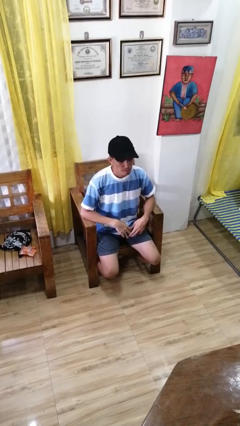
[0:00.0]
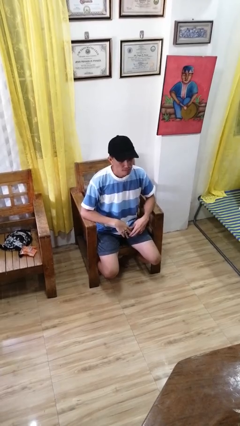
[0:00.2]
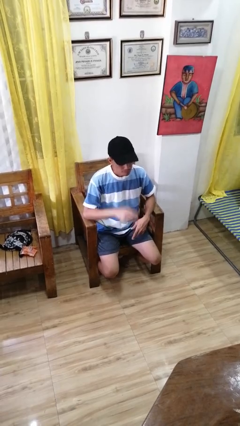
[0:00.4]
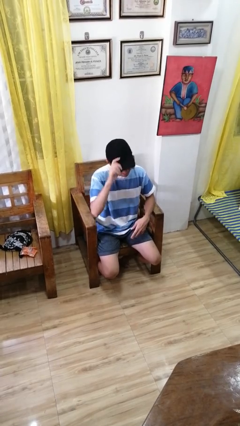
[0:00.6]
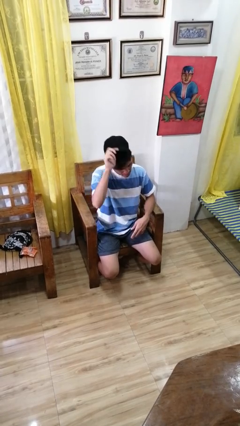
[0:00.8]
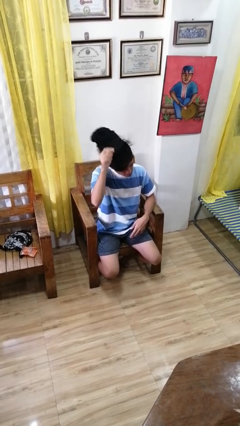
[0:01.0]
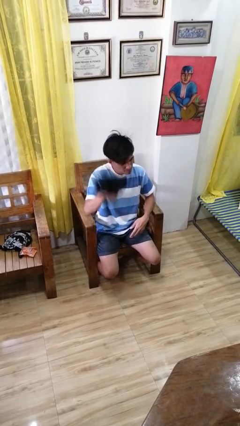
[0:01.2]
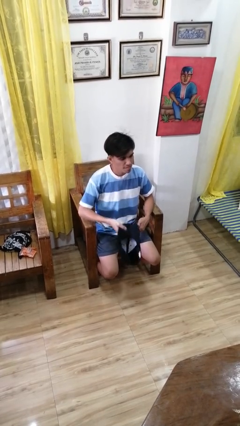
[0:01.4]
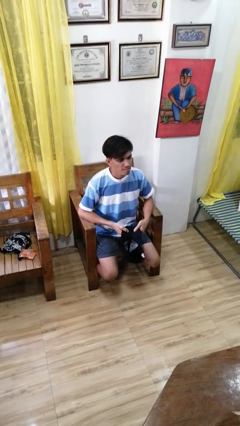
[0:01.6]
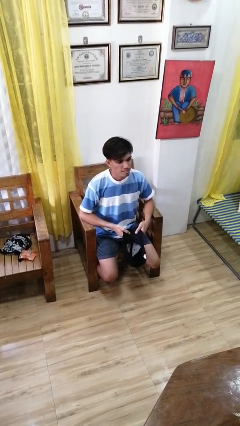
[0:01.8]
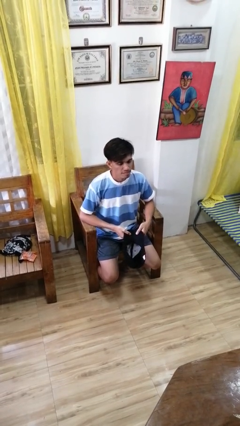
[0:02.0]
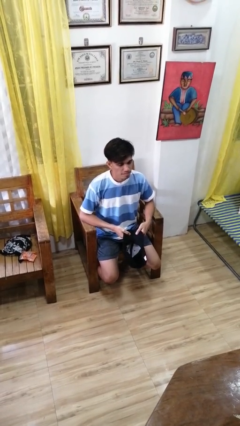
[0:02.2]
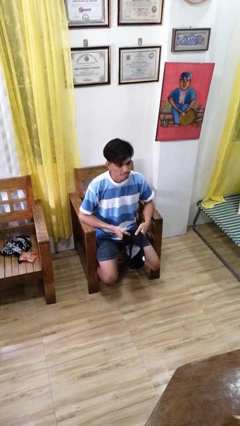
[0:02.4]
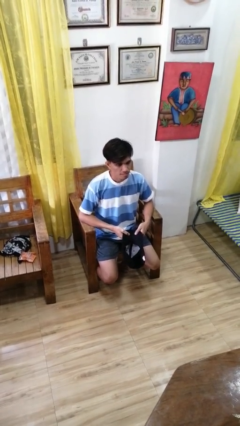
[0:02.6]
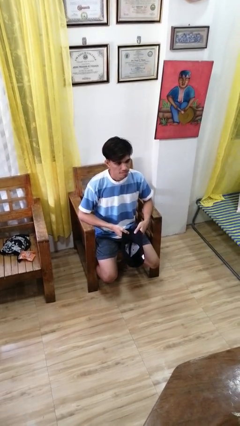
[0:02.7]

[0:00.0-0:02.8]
person takes off hat

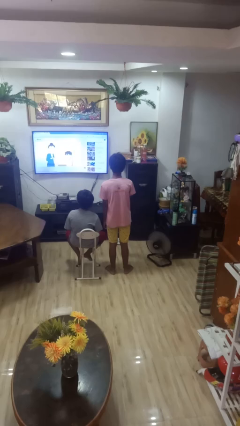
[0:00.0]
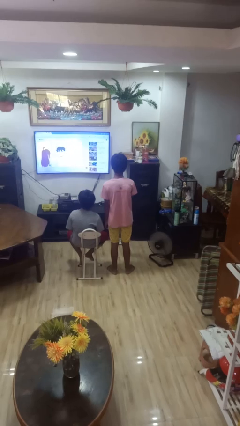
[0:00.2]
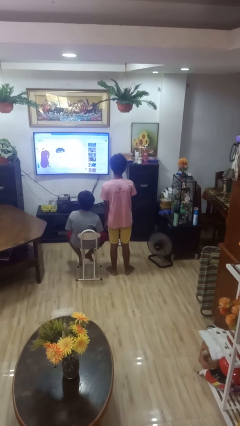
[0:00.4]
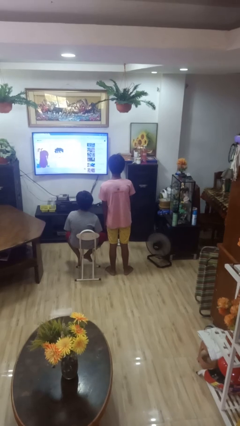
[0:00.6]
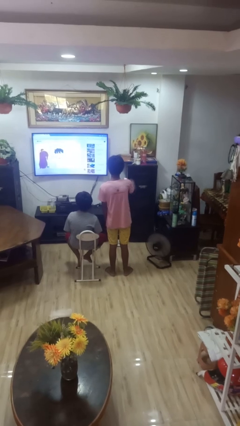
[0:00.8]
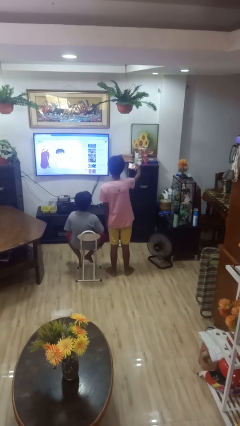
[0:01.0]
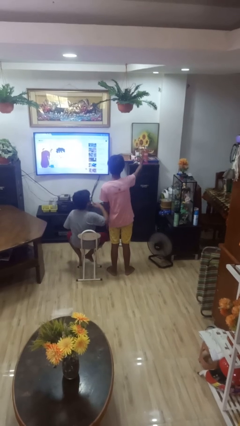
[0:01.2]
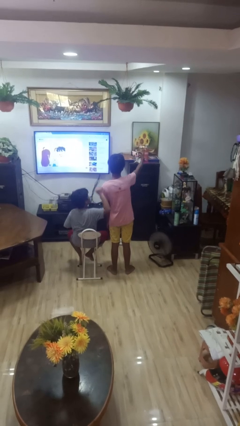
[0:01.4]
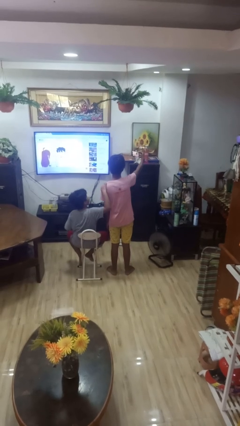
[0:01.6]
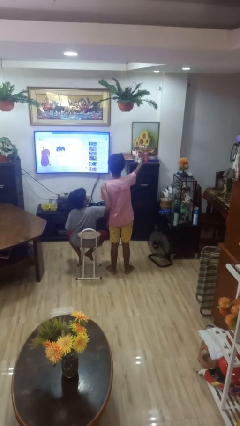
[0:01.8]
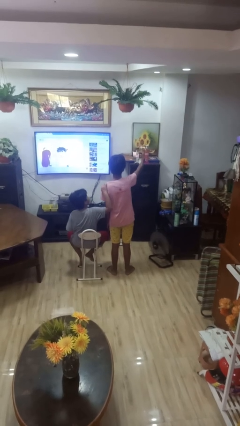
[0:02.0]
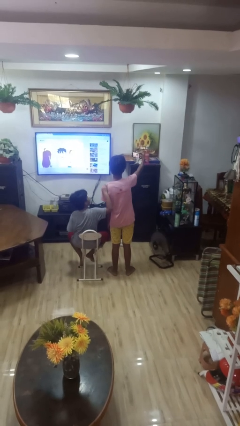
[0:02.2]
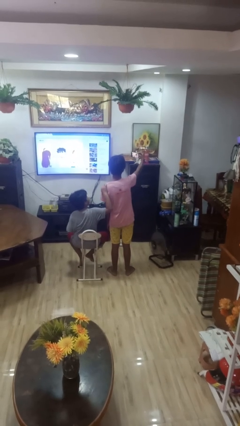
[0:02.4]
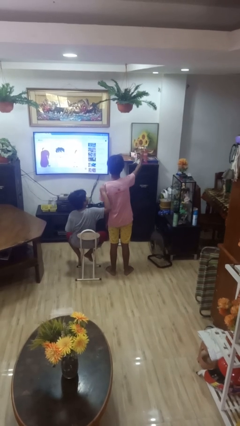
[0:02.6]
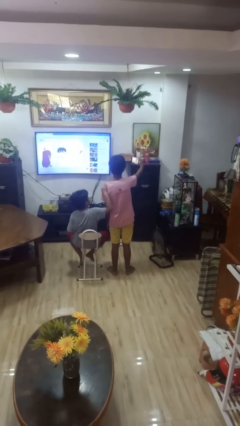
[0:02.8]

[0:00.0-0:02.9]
person takes selfie with person

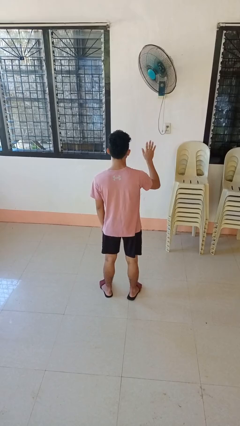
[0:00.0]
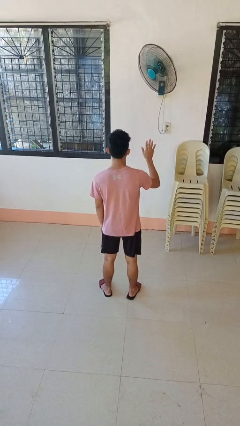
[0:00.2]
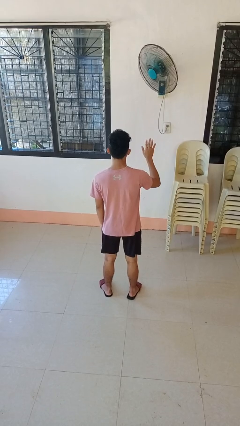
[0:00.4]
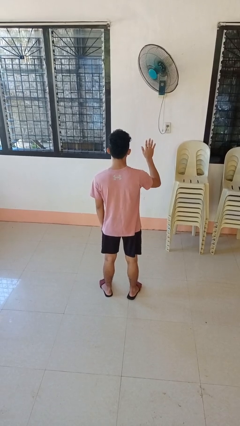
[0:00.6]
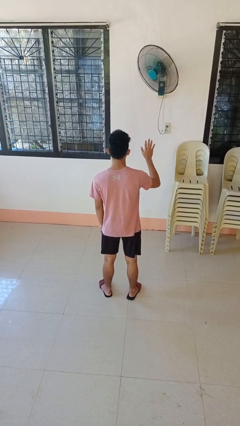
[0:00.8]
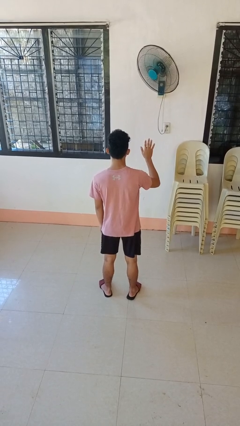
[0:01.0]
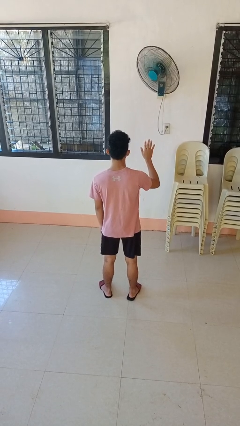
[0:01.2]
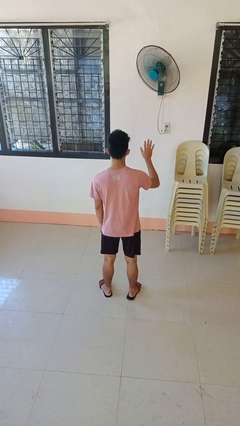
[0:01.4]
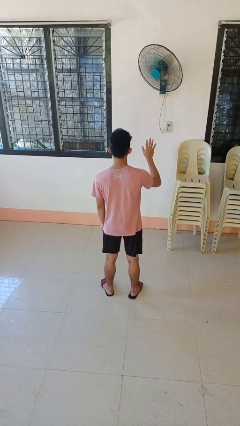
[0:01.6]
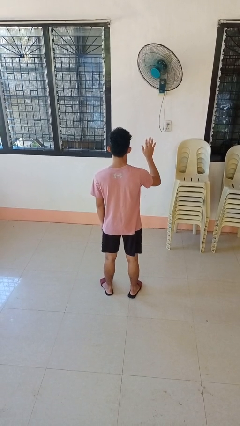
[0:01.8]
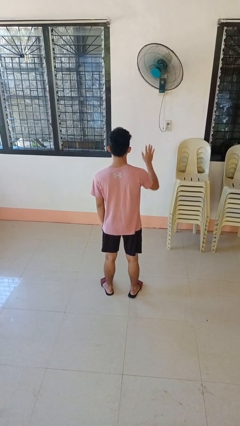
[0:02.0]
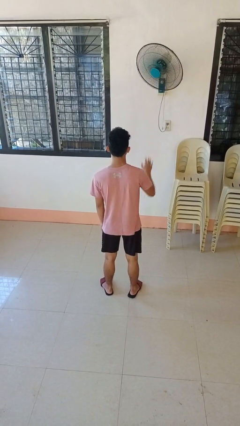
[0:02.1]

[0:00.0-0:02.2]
person gestures number five

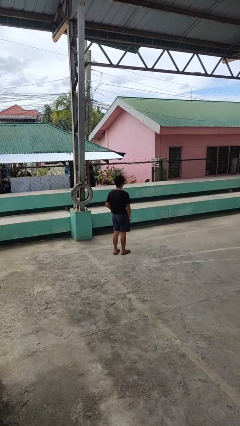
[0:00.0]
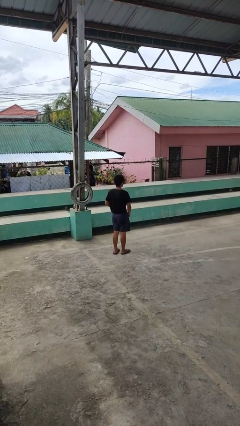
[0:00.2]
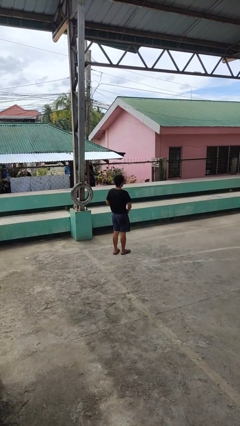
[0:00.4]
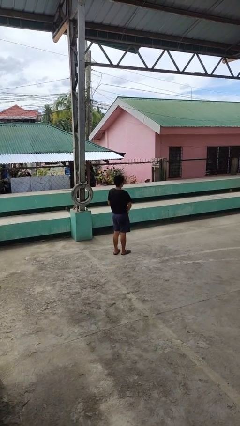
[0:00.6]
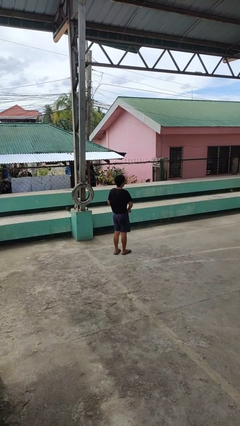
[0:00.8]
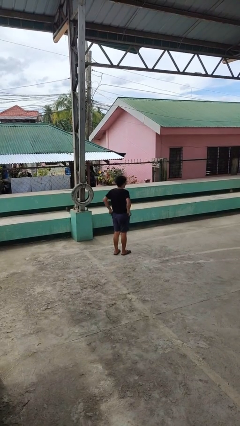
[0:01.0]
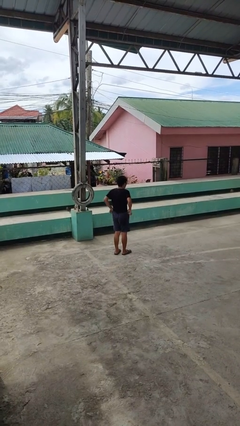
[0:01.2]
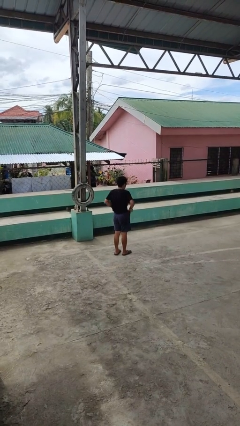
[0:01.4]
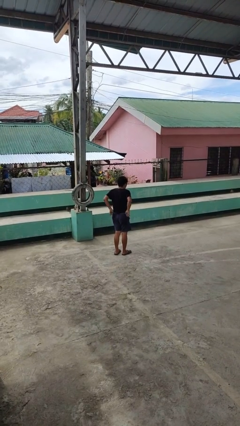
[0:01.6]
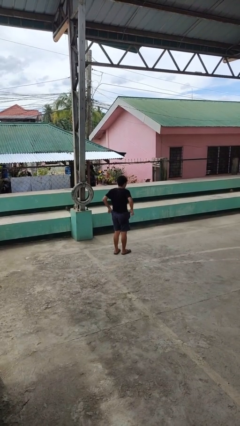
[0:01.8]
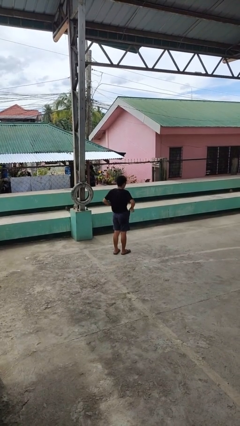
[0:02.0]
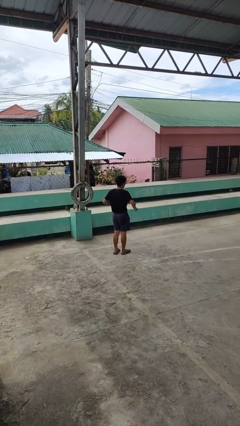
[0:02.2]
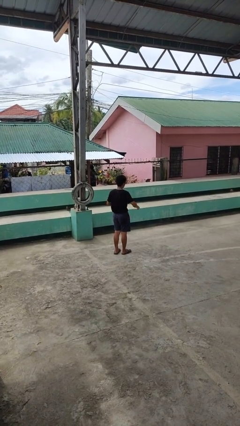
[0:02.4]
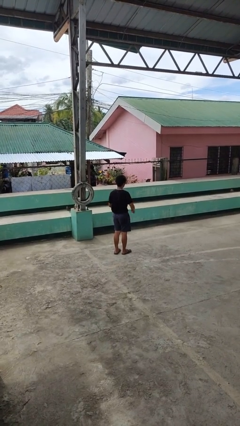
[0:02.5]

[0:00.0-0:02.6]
person hikes up pants

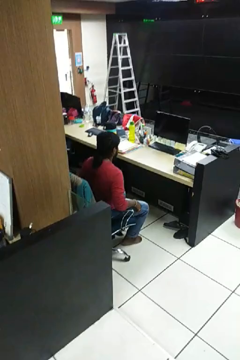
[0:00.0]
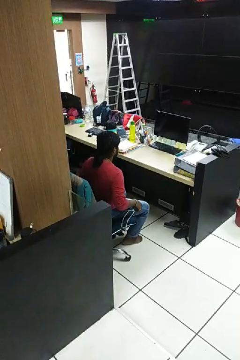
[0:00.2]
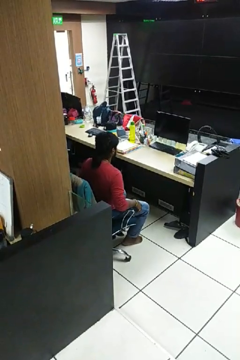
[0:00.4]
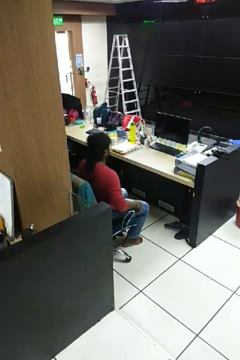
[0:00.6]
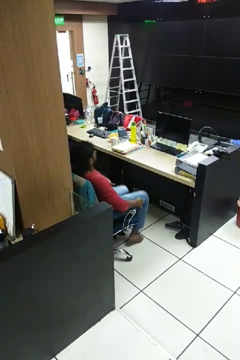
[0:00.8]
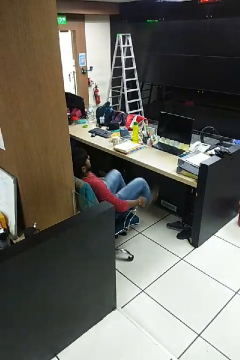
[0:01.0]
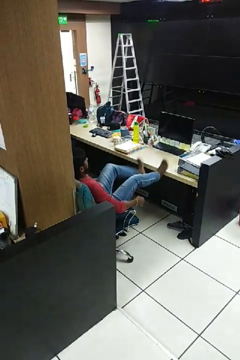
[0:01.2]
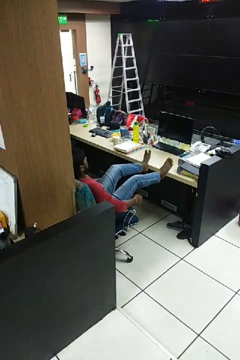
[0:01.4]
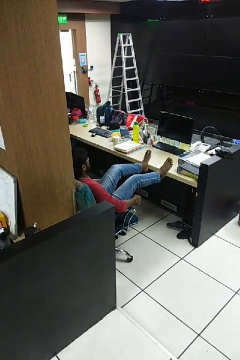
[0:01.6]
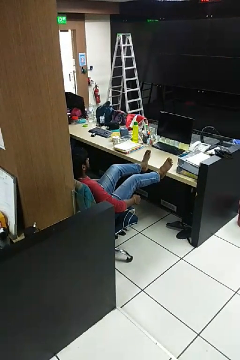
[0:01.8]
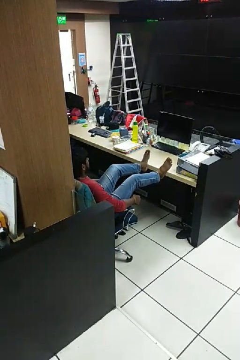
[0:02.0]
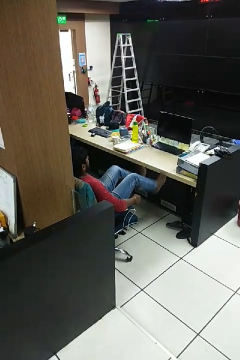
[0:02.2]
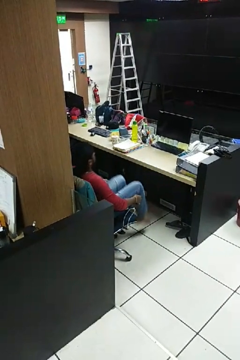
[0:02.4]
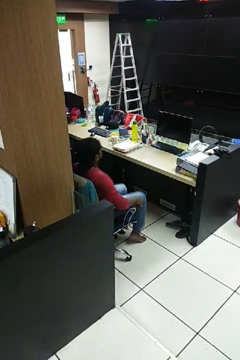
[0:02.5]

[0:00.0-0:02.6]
person puts feet up

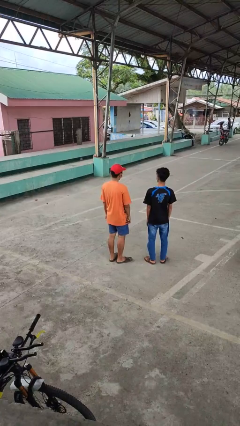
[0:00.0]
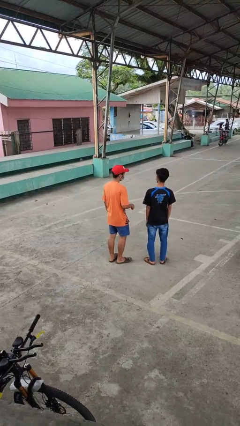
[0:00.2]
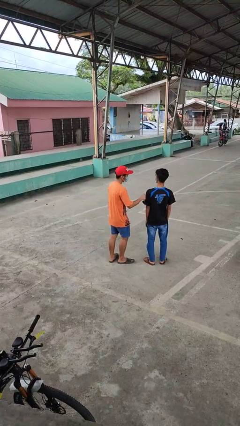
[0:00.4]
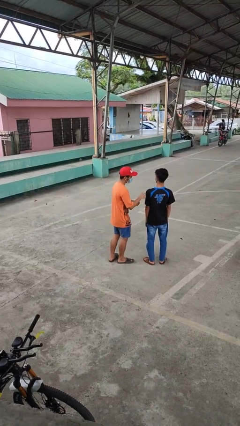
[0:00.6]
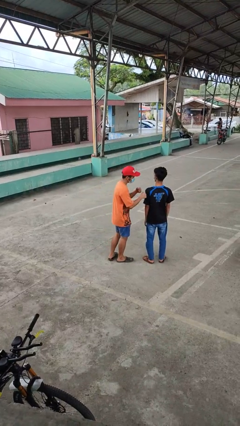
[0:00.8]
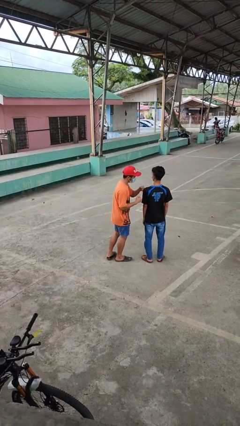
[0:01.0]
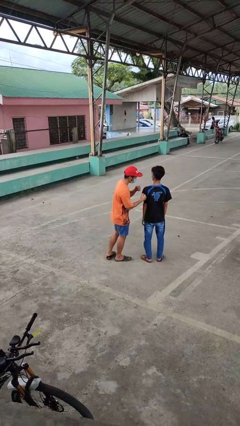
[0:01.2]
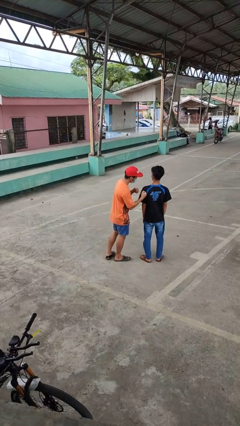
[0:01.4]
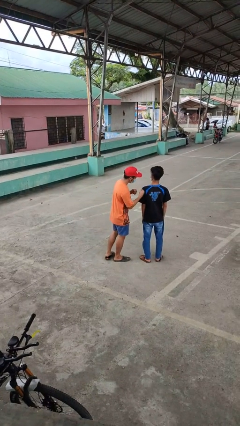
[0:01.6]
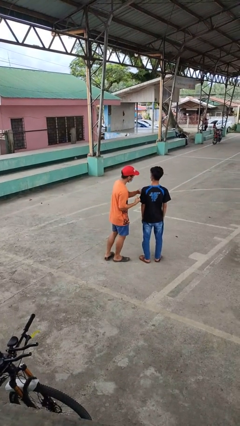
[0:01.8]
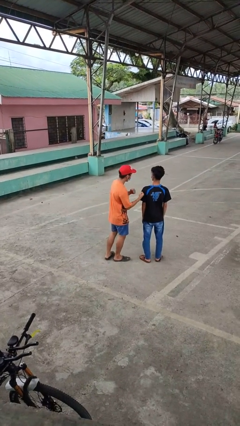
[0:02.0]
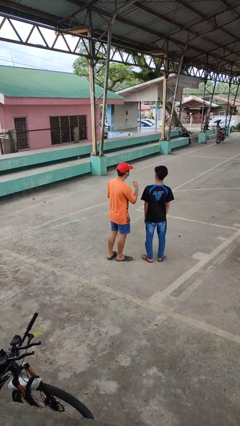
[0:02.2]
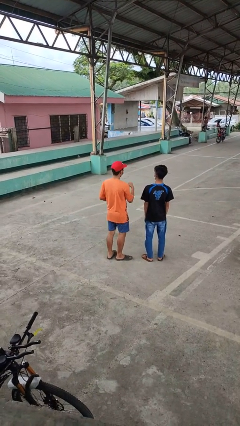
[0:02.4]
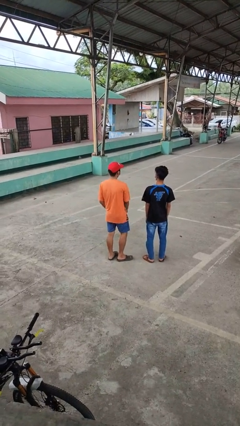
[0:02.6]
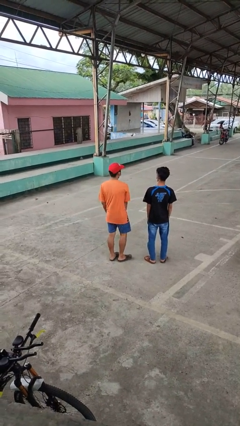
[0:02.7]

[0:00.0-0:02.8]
person pounds shoulders of person

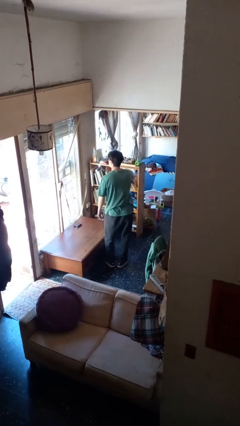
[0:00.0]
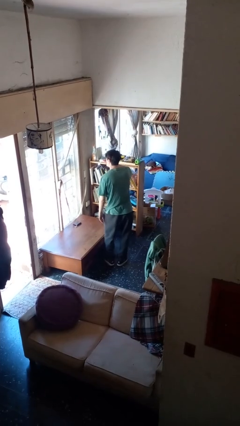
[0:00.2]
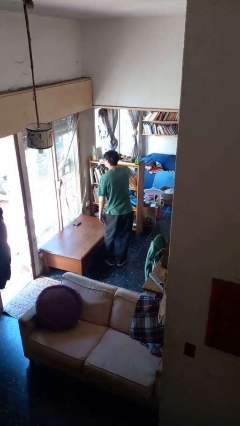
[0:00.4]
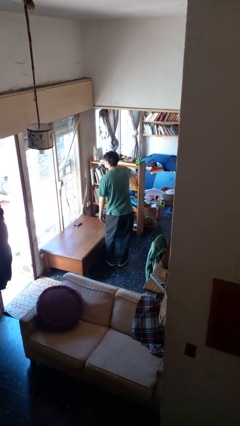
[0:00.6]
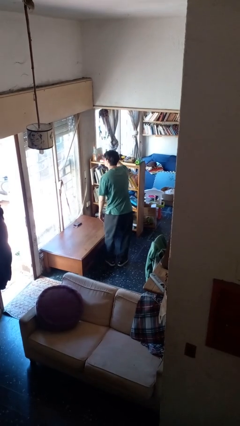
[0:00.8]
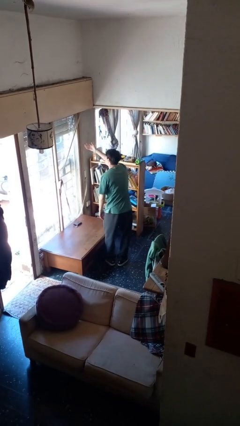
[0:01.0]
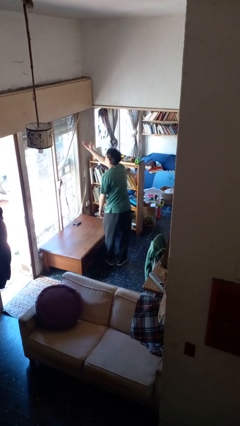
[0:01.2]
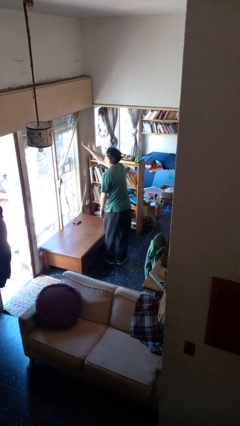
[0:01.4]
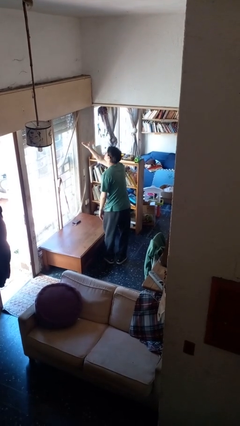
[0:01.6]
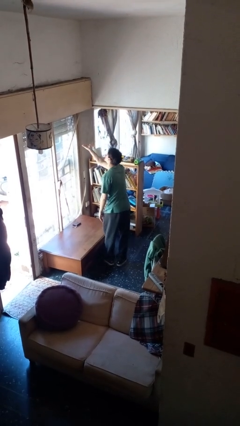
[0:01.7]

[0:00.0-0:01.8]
person gestures blow kiss
